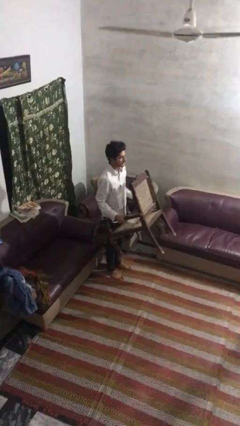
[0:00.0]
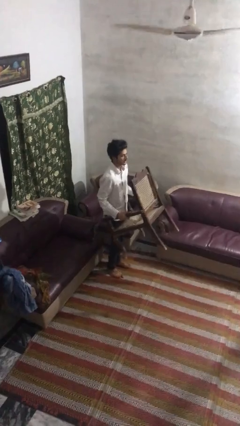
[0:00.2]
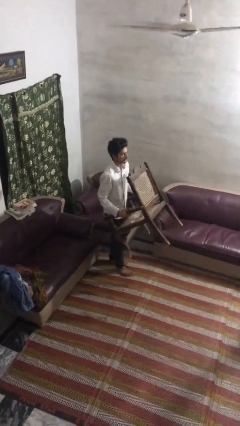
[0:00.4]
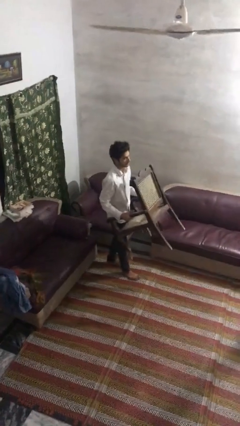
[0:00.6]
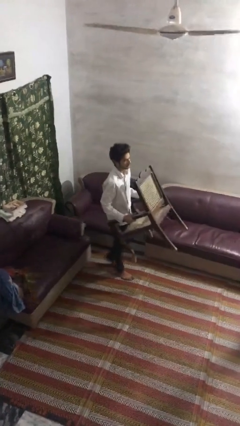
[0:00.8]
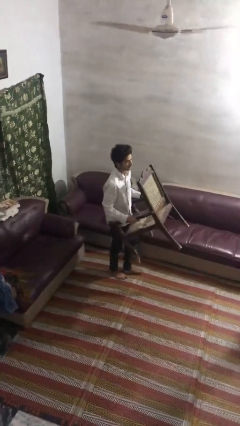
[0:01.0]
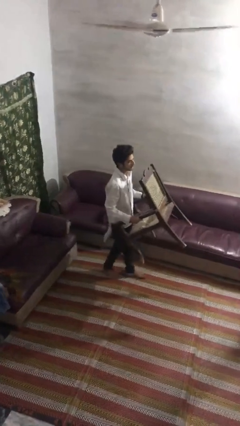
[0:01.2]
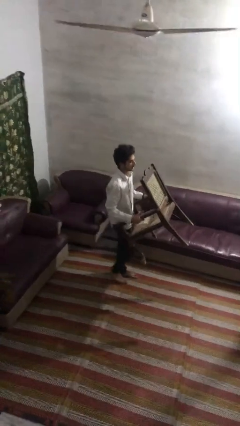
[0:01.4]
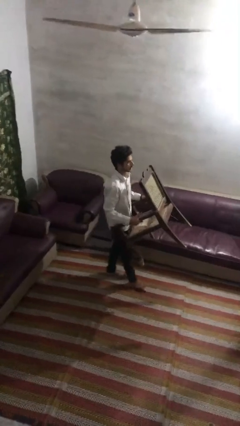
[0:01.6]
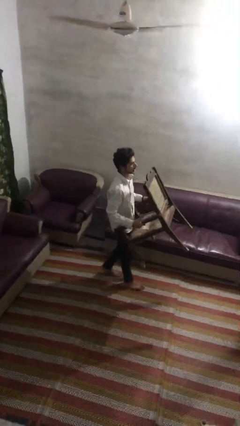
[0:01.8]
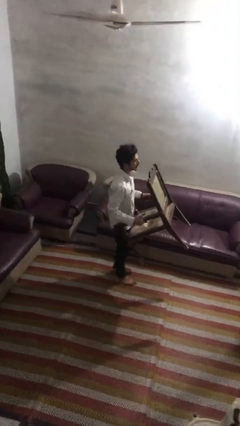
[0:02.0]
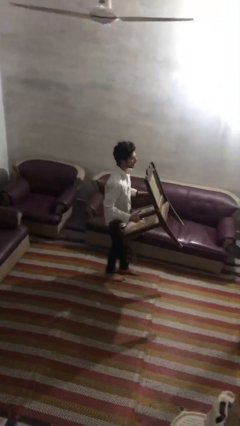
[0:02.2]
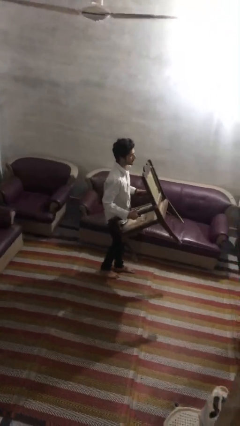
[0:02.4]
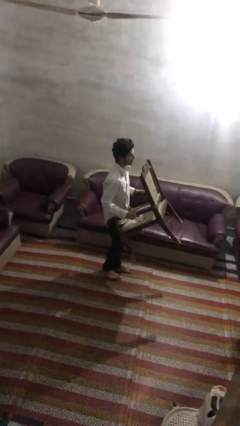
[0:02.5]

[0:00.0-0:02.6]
person carries furniture

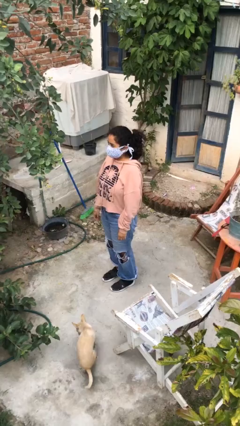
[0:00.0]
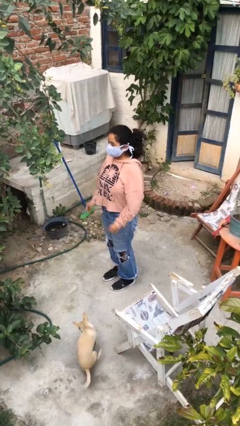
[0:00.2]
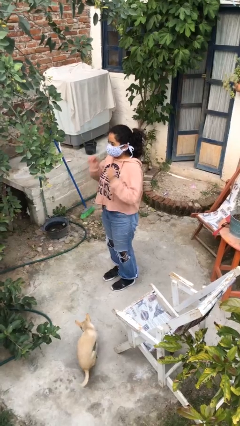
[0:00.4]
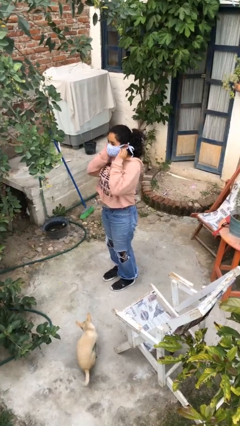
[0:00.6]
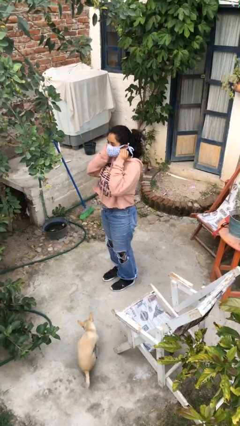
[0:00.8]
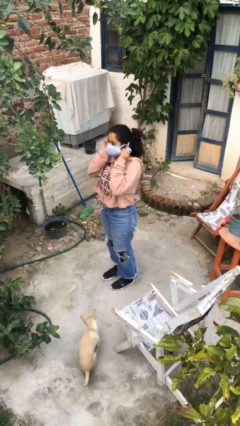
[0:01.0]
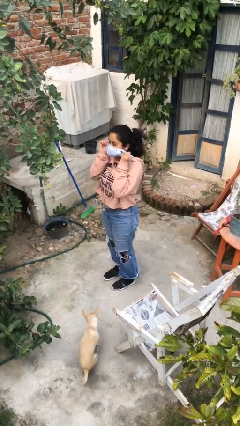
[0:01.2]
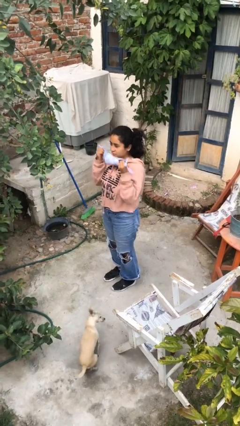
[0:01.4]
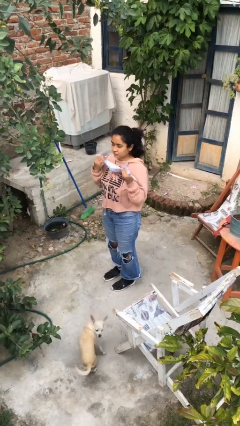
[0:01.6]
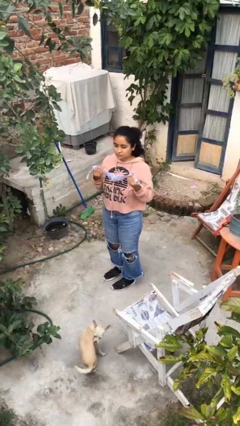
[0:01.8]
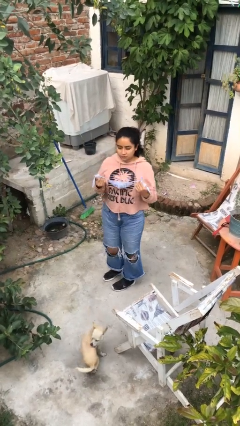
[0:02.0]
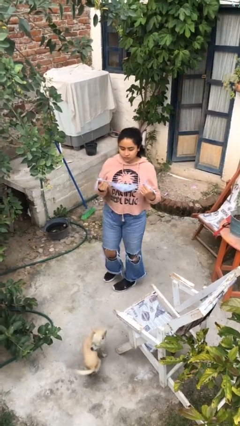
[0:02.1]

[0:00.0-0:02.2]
person takes off facemask

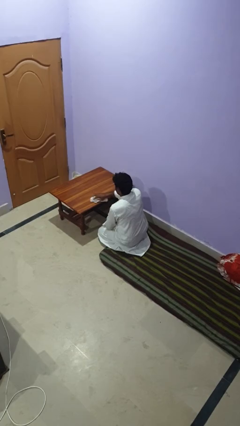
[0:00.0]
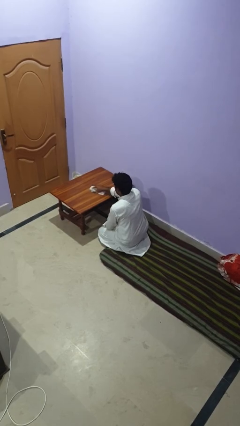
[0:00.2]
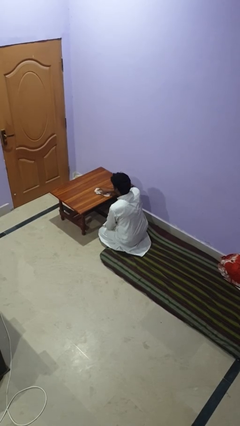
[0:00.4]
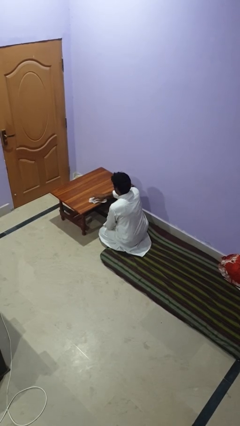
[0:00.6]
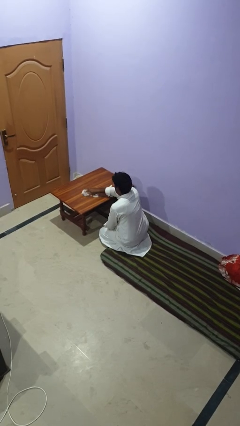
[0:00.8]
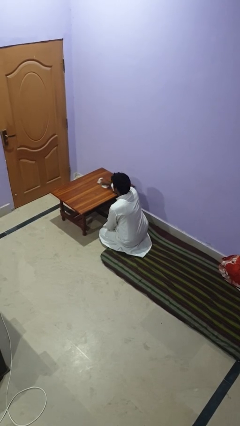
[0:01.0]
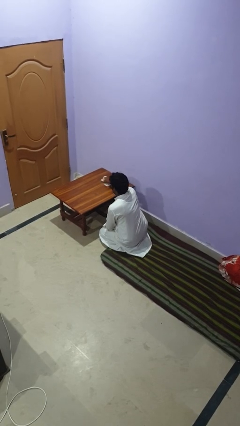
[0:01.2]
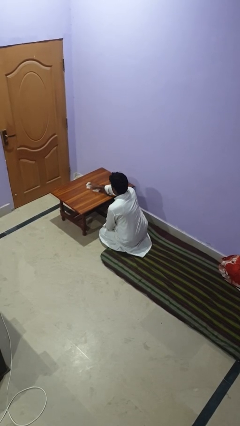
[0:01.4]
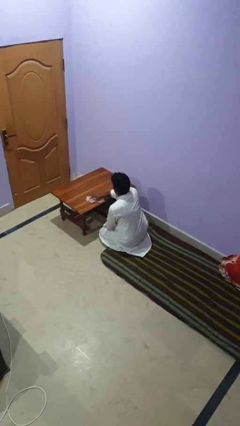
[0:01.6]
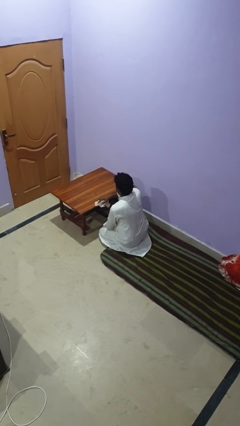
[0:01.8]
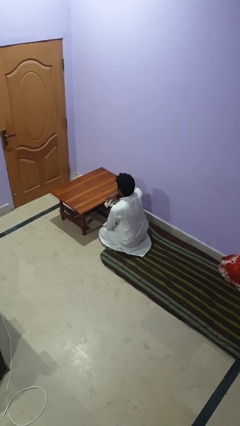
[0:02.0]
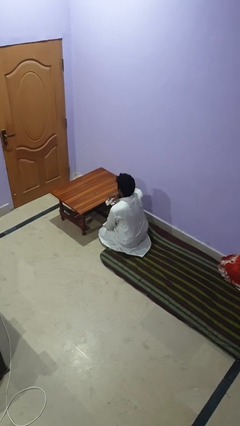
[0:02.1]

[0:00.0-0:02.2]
person cleans table with rag

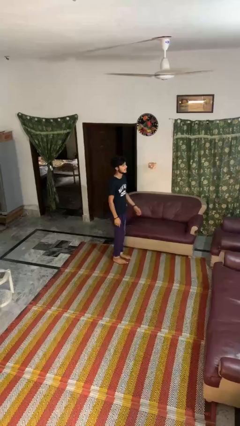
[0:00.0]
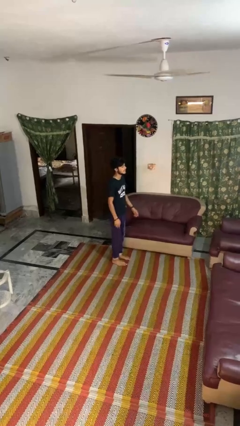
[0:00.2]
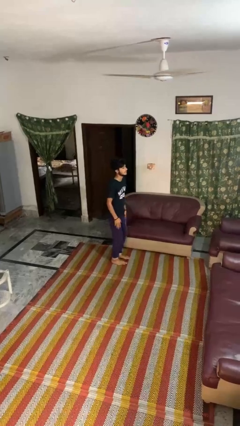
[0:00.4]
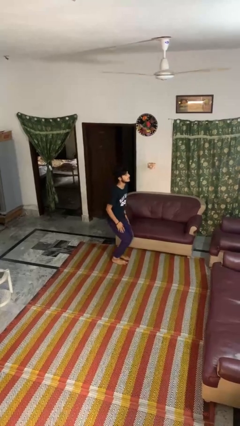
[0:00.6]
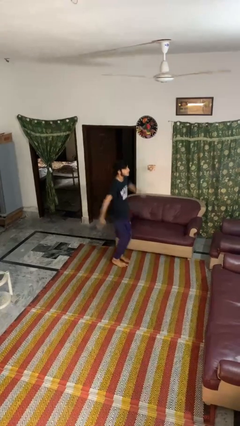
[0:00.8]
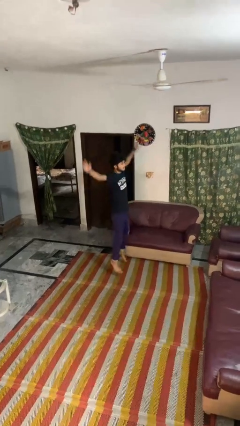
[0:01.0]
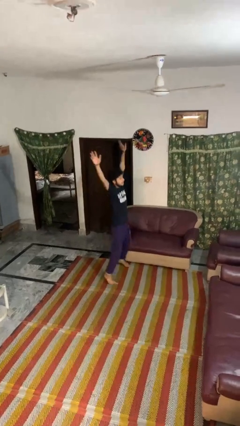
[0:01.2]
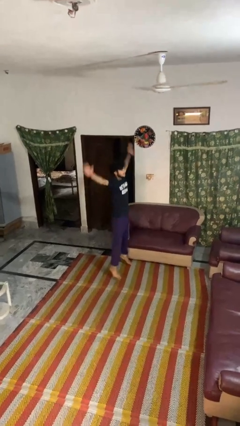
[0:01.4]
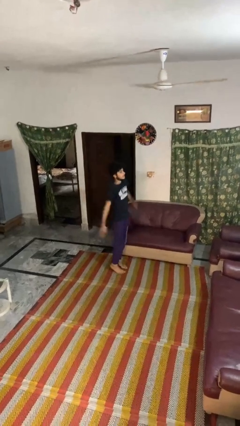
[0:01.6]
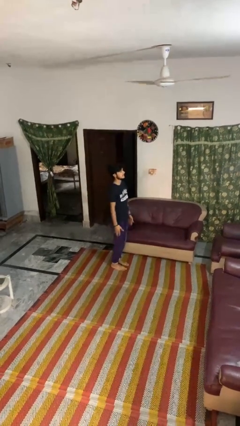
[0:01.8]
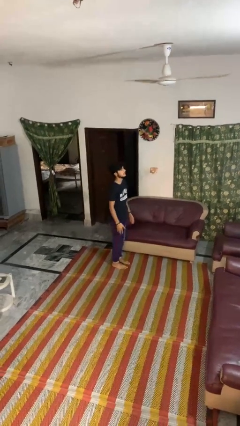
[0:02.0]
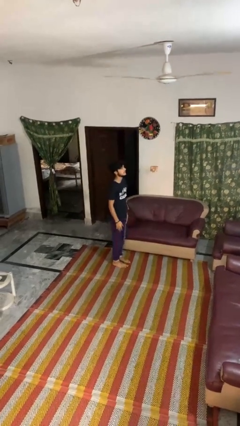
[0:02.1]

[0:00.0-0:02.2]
person exercises with jumping jacks

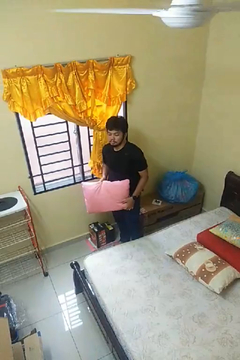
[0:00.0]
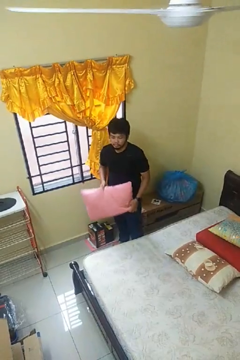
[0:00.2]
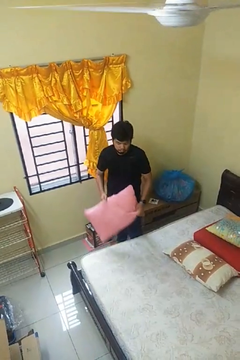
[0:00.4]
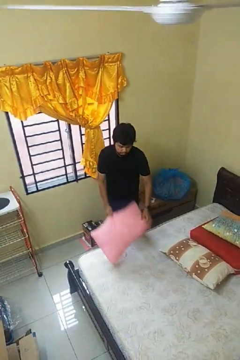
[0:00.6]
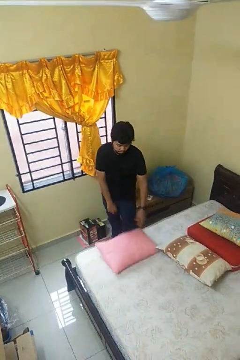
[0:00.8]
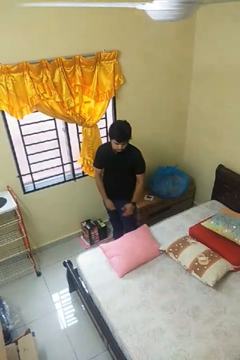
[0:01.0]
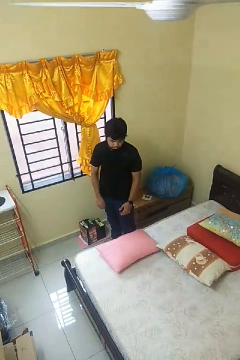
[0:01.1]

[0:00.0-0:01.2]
person puts down object on bed

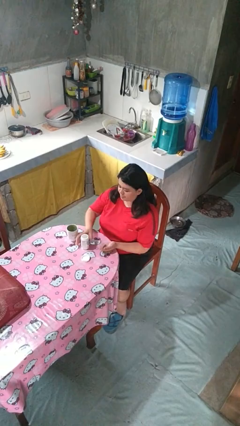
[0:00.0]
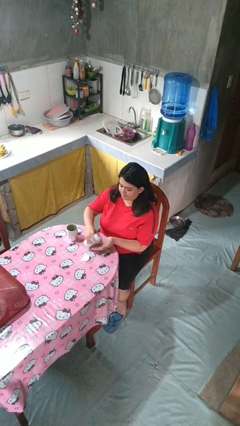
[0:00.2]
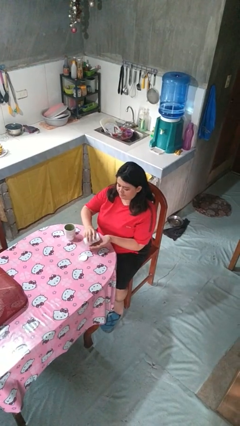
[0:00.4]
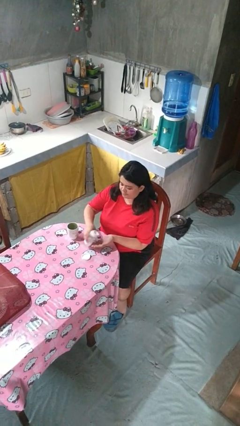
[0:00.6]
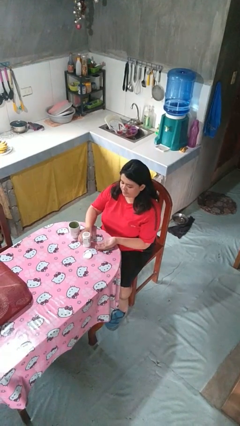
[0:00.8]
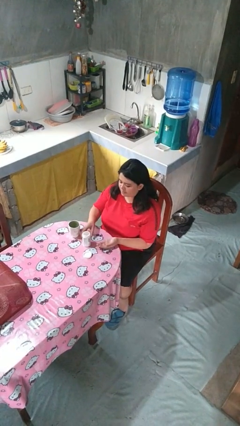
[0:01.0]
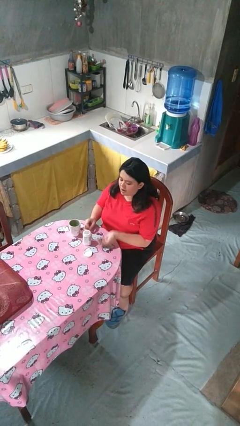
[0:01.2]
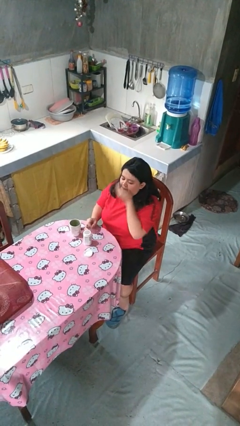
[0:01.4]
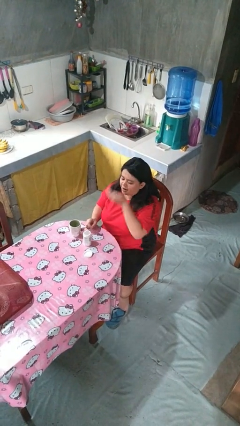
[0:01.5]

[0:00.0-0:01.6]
person takes medicine pills

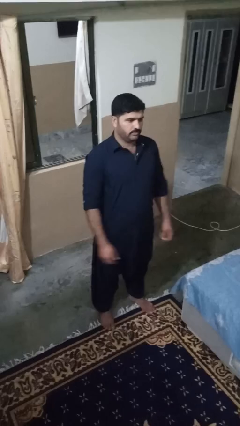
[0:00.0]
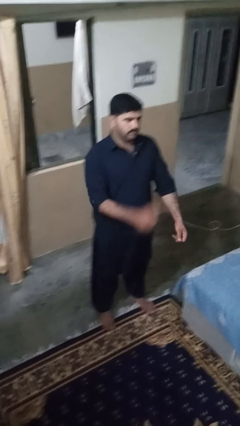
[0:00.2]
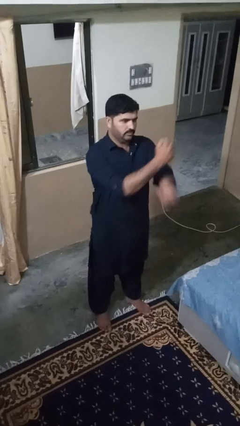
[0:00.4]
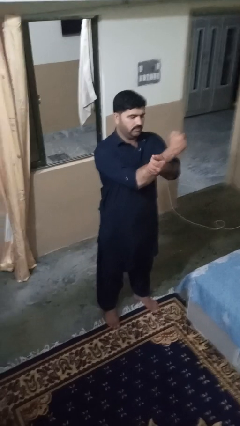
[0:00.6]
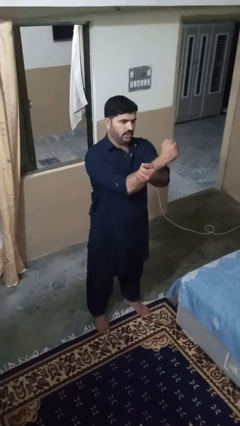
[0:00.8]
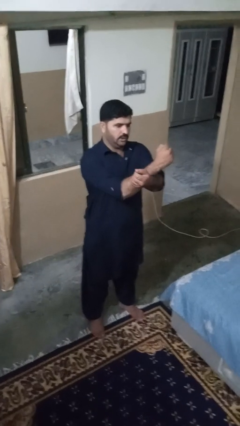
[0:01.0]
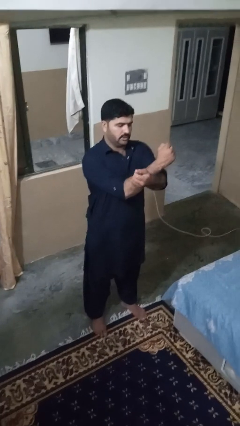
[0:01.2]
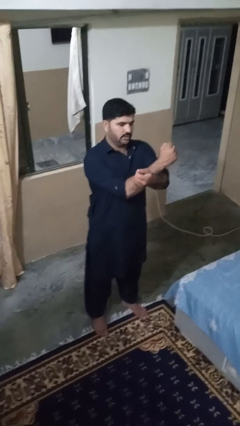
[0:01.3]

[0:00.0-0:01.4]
person crosses arms

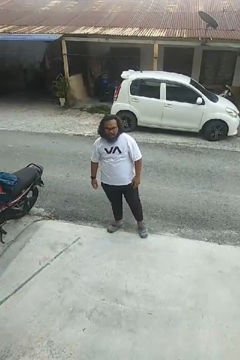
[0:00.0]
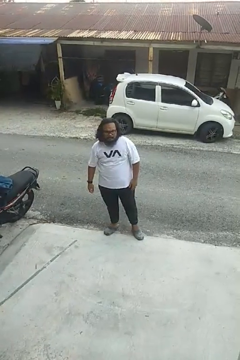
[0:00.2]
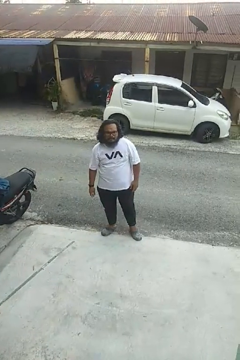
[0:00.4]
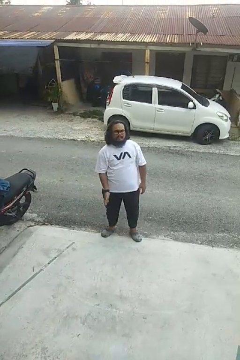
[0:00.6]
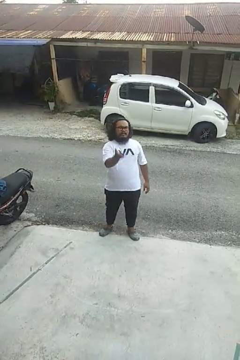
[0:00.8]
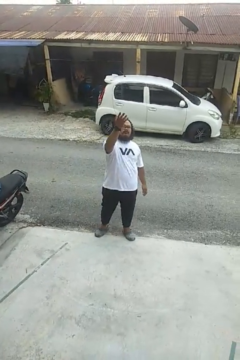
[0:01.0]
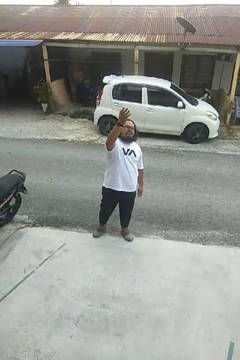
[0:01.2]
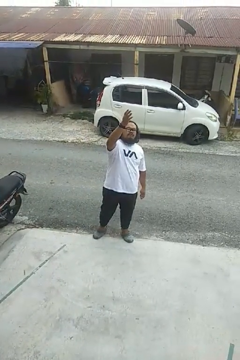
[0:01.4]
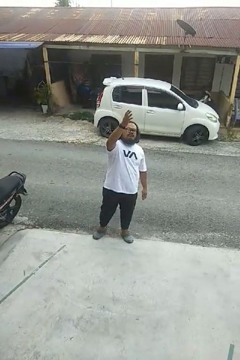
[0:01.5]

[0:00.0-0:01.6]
person gestures swipe up

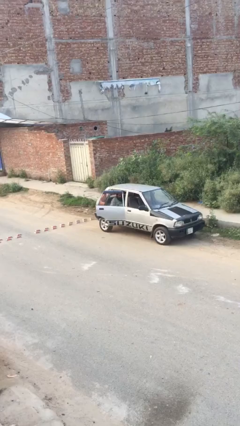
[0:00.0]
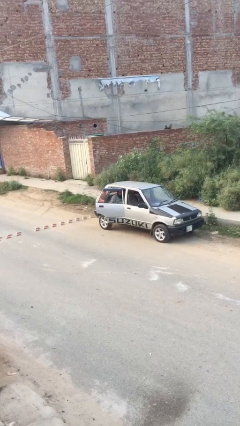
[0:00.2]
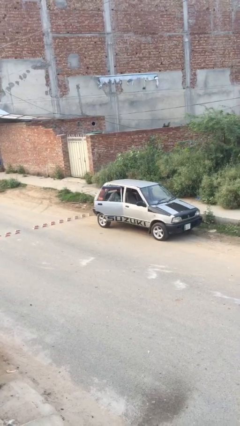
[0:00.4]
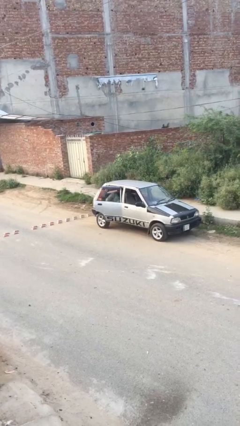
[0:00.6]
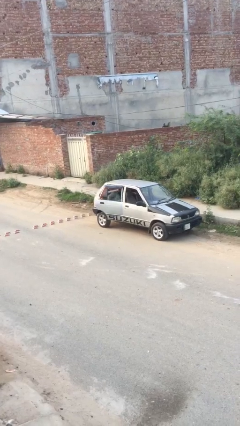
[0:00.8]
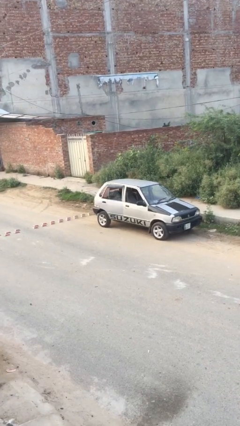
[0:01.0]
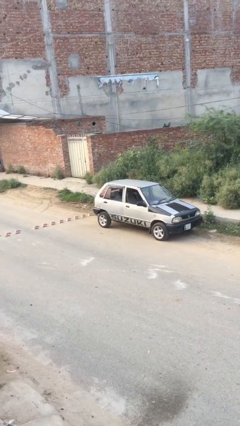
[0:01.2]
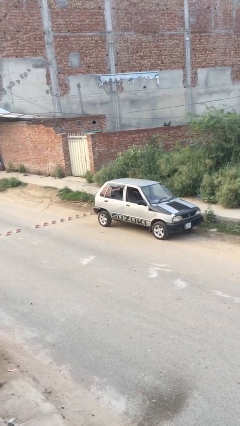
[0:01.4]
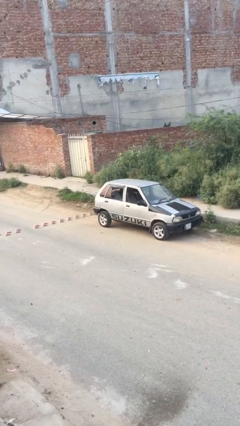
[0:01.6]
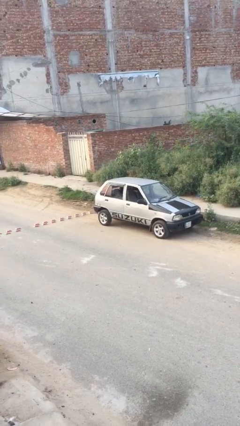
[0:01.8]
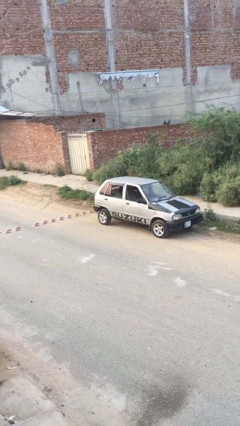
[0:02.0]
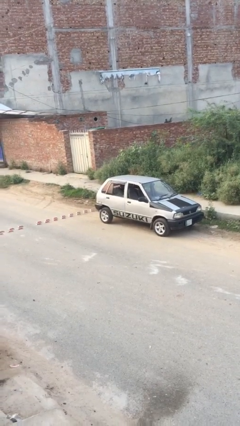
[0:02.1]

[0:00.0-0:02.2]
person closes car door
